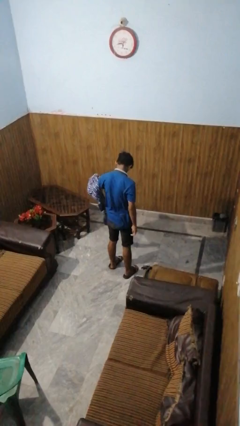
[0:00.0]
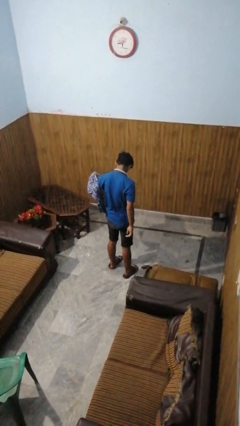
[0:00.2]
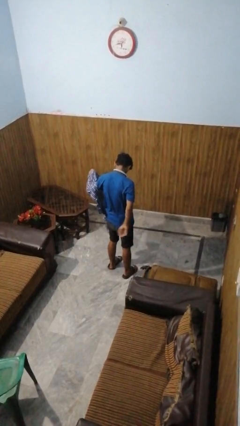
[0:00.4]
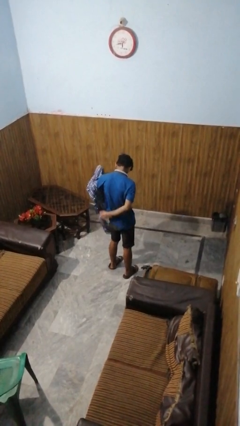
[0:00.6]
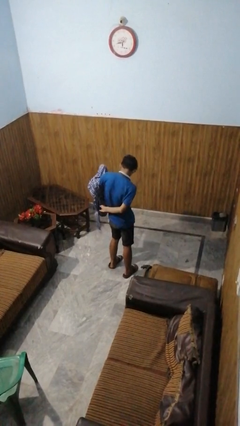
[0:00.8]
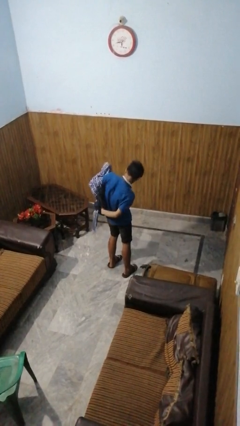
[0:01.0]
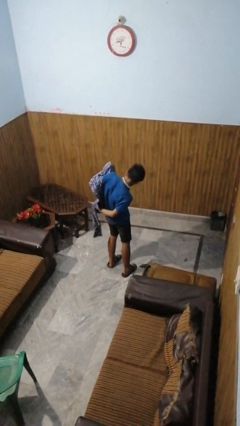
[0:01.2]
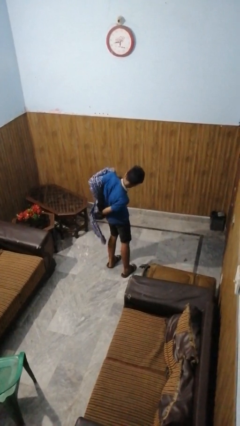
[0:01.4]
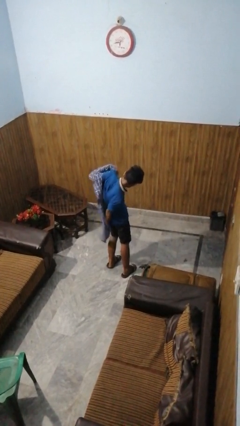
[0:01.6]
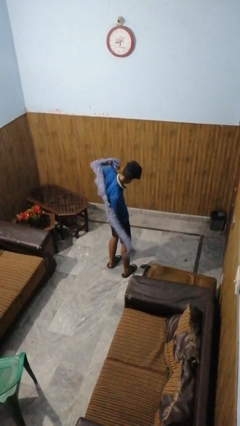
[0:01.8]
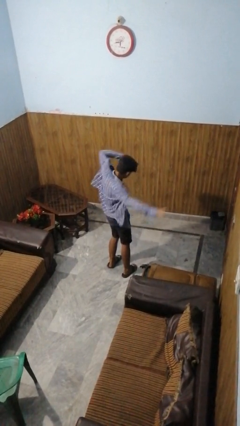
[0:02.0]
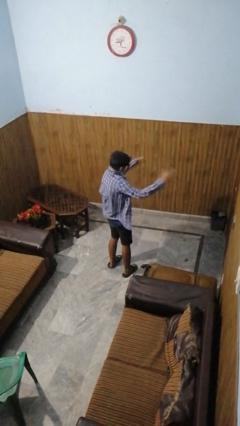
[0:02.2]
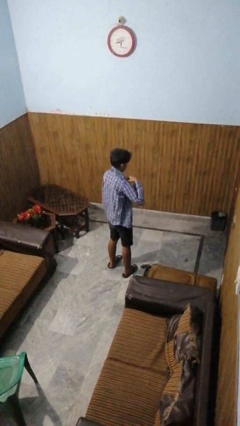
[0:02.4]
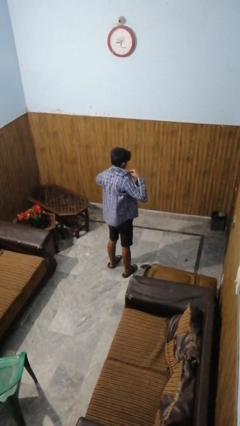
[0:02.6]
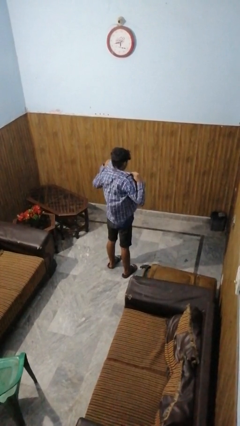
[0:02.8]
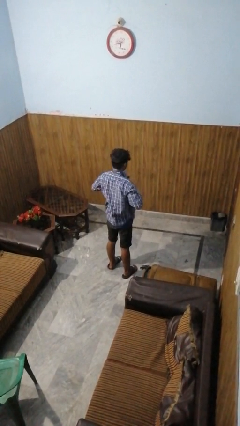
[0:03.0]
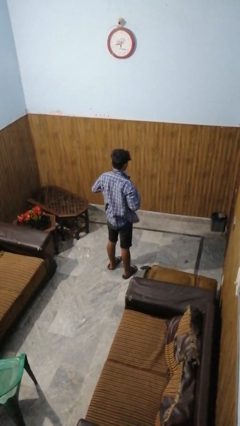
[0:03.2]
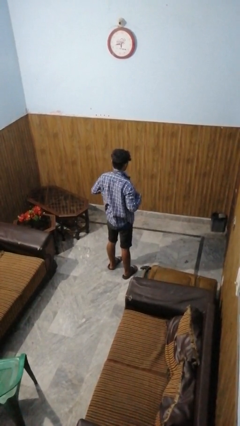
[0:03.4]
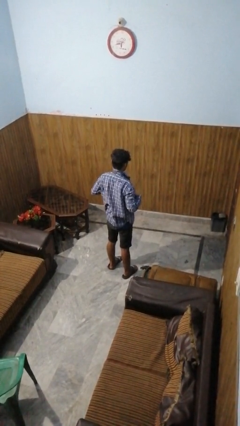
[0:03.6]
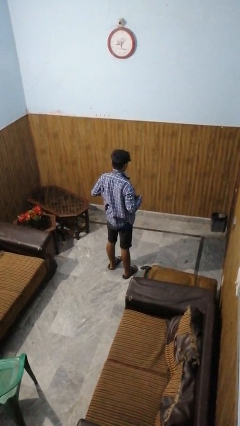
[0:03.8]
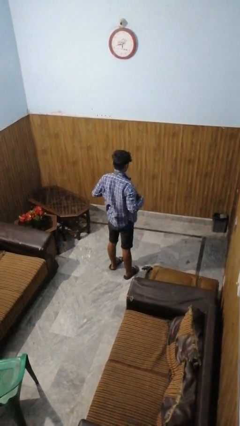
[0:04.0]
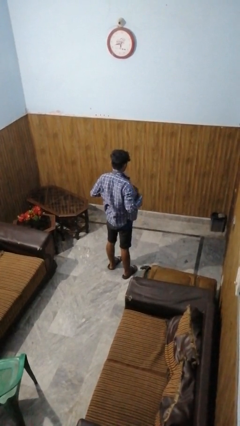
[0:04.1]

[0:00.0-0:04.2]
person puts on shirt

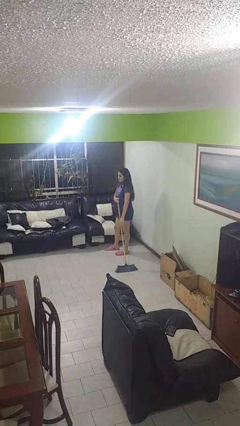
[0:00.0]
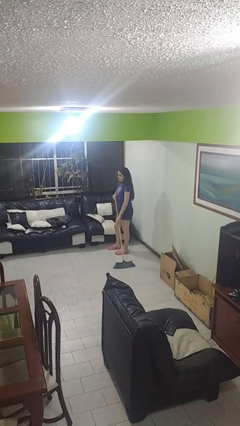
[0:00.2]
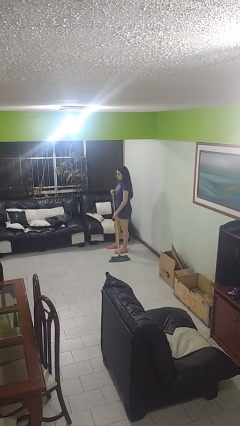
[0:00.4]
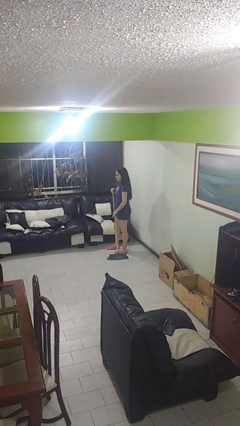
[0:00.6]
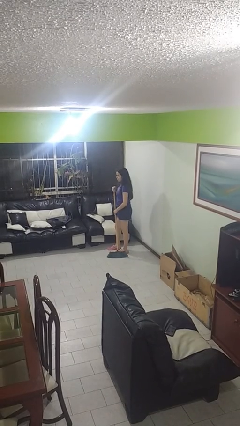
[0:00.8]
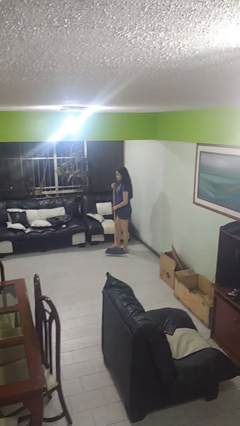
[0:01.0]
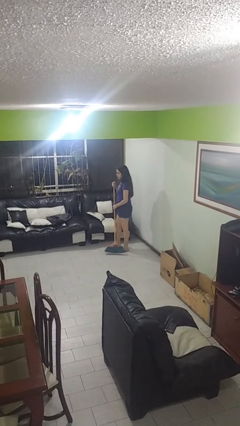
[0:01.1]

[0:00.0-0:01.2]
person sweeps floor

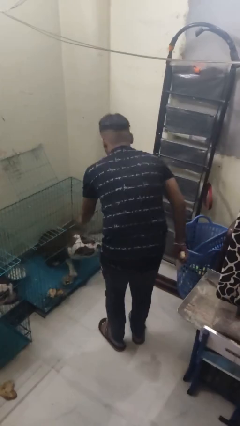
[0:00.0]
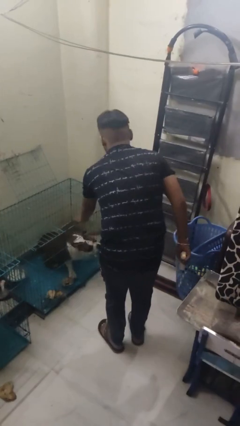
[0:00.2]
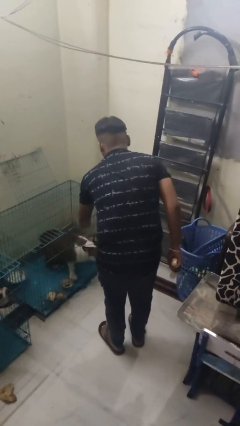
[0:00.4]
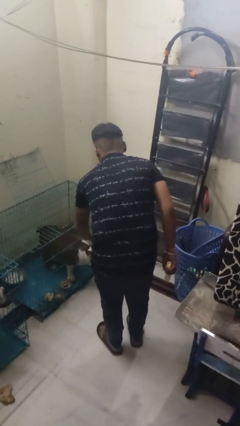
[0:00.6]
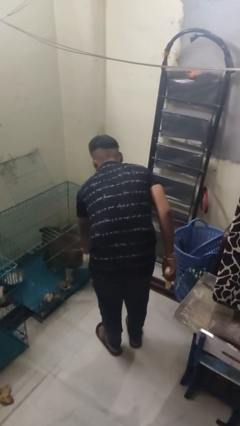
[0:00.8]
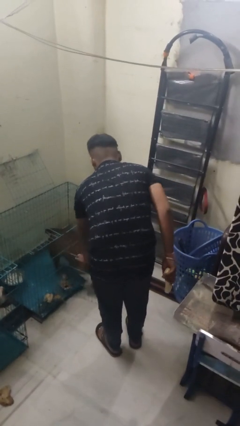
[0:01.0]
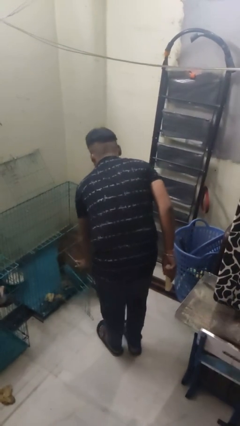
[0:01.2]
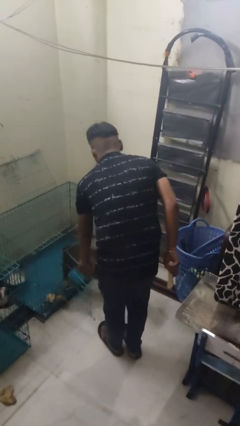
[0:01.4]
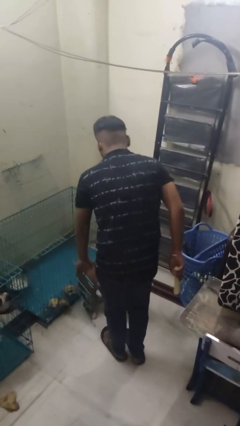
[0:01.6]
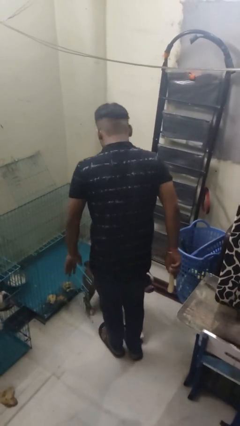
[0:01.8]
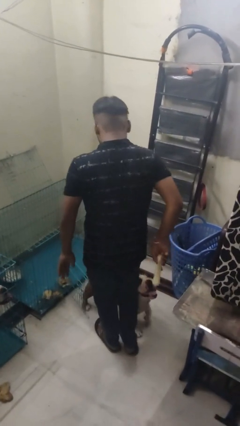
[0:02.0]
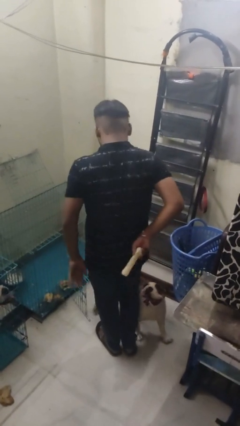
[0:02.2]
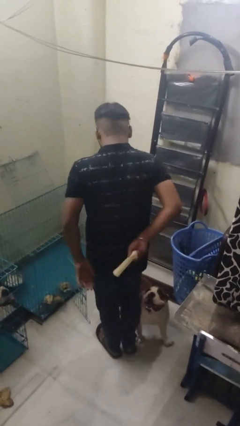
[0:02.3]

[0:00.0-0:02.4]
person uncrates dog

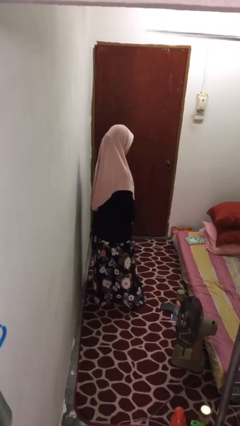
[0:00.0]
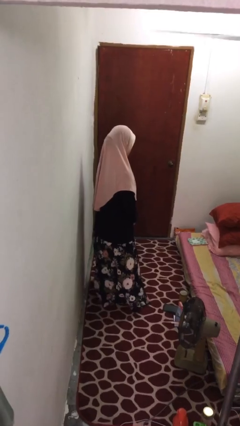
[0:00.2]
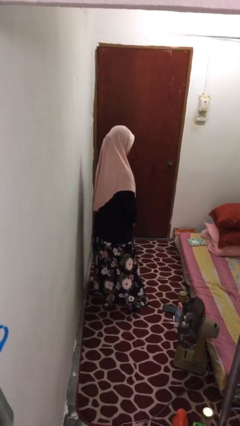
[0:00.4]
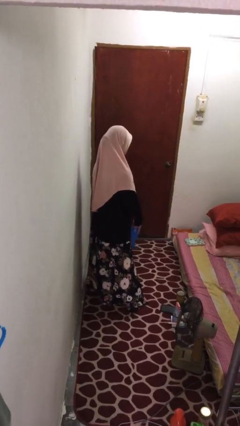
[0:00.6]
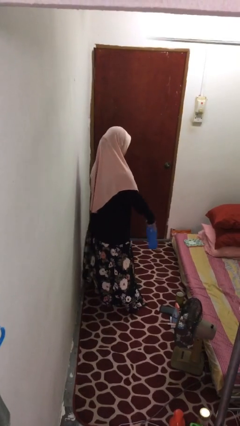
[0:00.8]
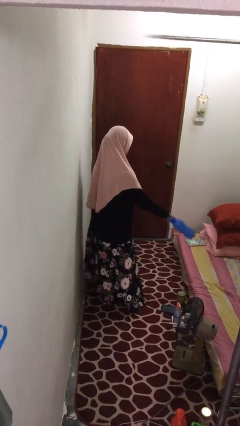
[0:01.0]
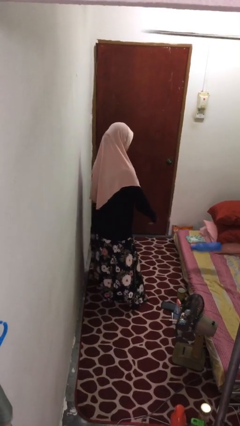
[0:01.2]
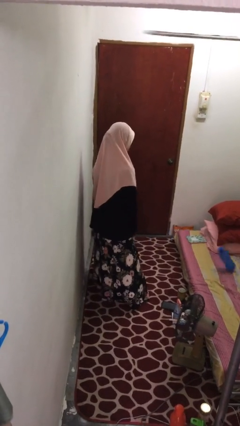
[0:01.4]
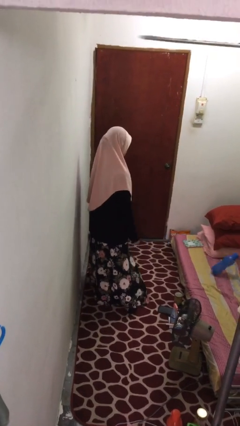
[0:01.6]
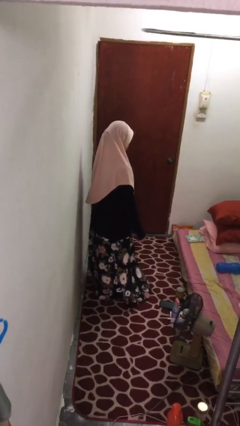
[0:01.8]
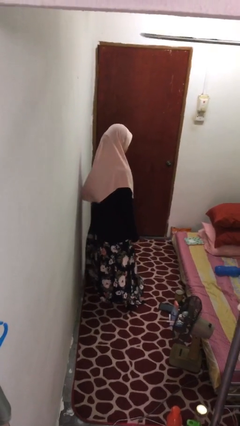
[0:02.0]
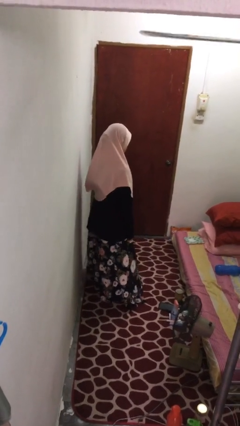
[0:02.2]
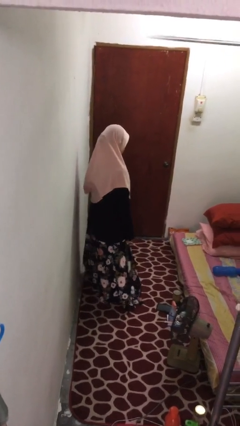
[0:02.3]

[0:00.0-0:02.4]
person throws object on bed

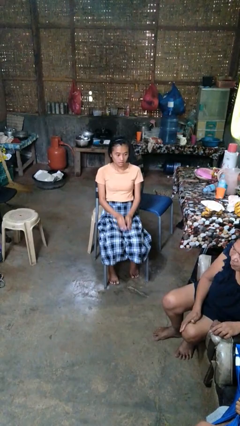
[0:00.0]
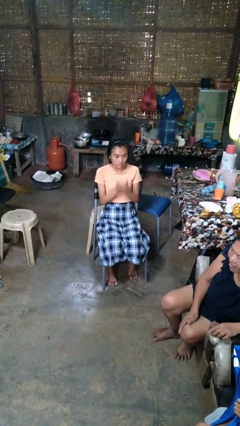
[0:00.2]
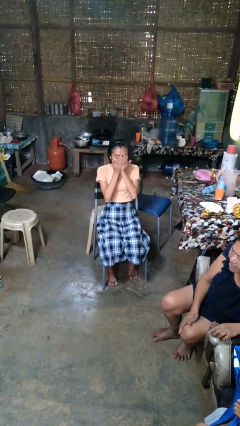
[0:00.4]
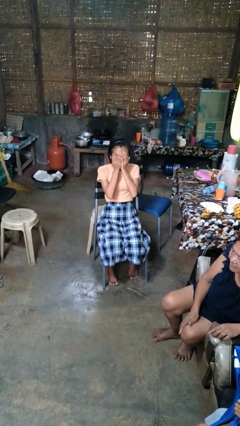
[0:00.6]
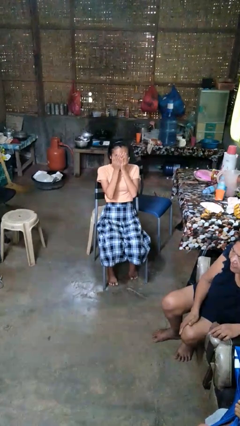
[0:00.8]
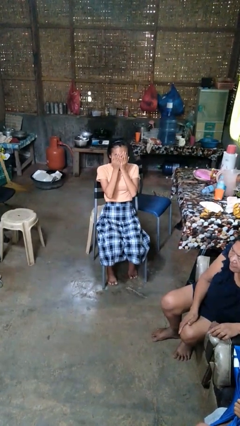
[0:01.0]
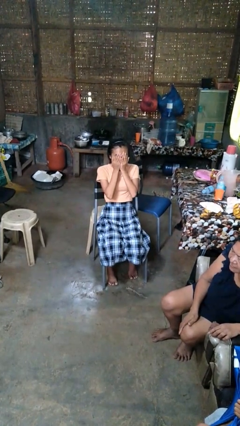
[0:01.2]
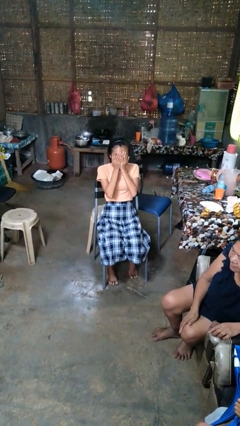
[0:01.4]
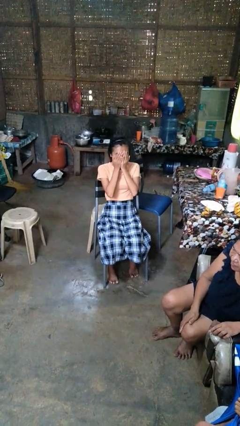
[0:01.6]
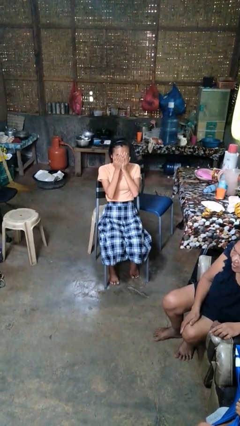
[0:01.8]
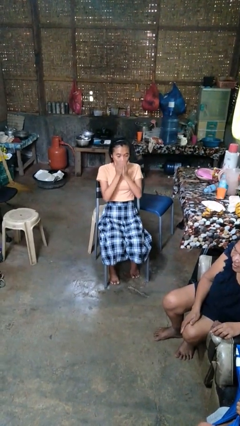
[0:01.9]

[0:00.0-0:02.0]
person covers face with hands

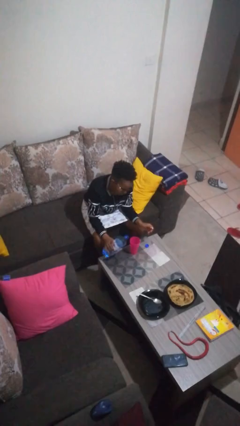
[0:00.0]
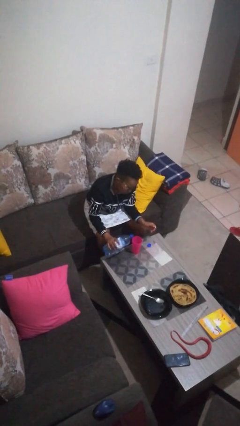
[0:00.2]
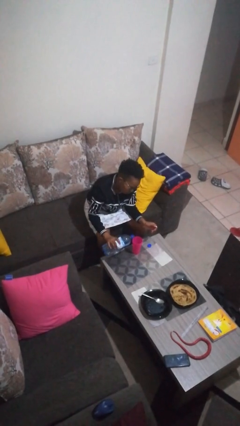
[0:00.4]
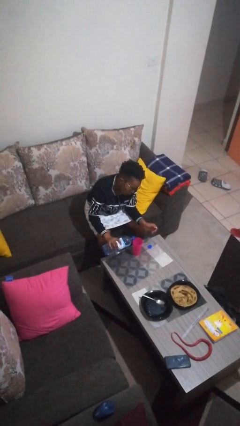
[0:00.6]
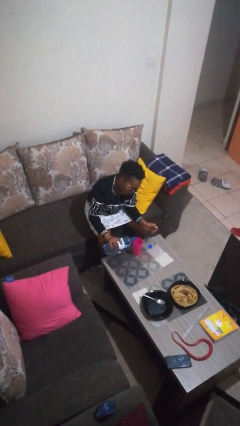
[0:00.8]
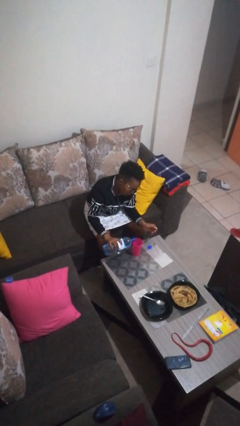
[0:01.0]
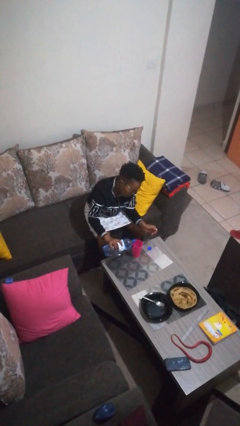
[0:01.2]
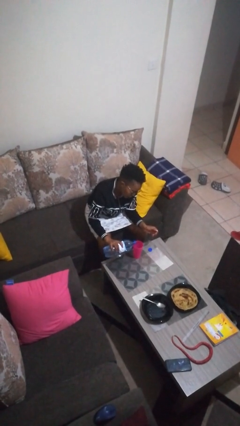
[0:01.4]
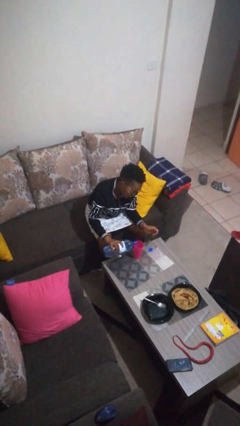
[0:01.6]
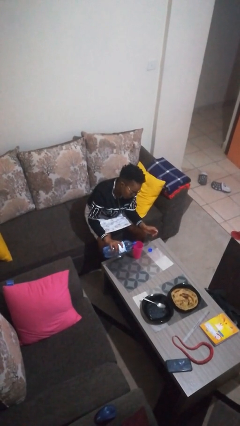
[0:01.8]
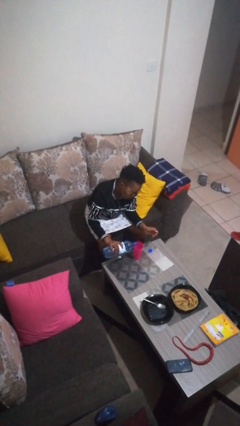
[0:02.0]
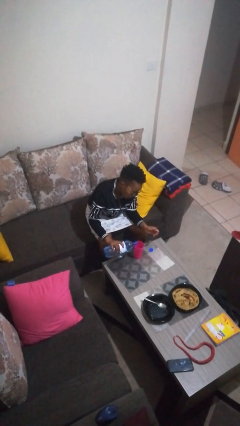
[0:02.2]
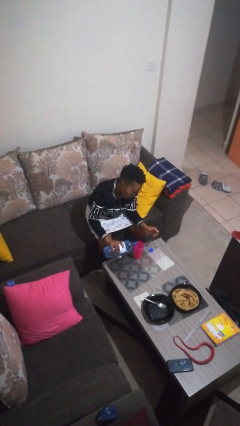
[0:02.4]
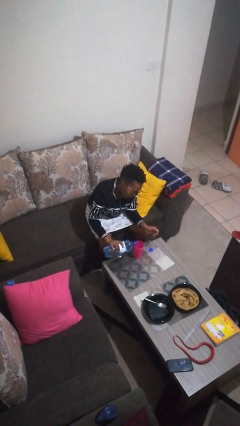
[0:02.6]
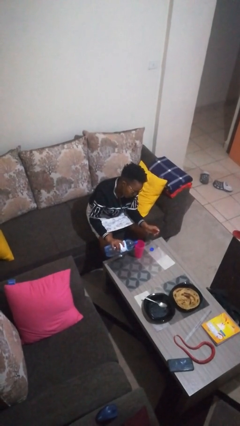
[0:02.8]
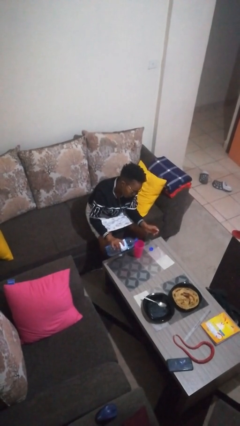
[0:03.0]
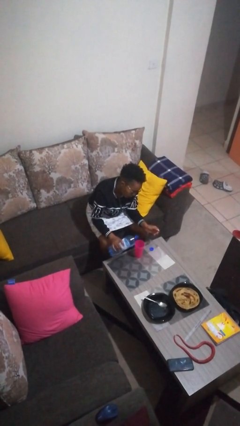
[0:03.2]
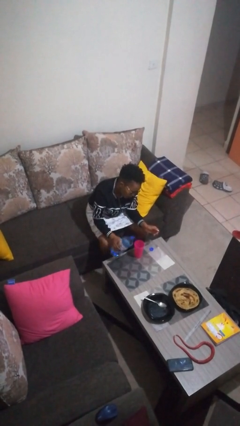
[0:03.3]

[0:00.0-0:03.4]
person pours liquid into cup

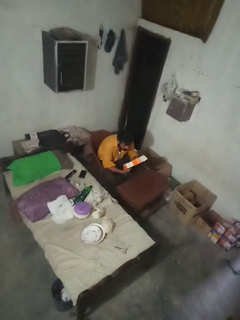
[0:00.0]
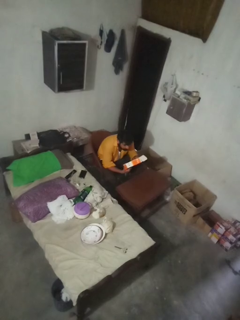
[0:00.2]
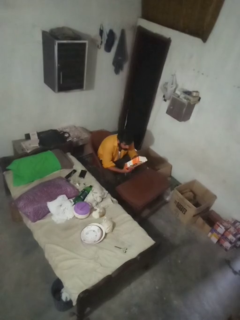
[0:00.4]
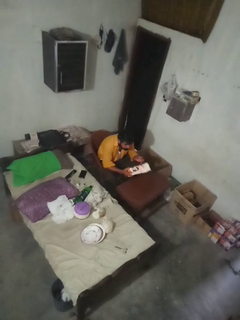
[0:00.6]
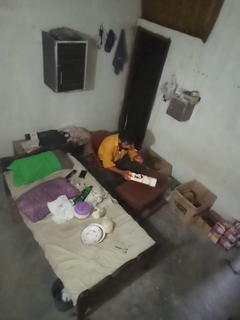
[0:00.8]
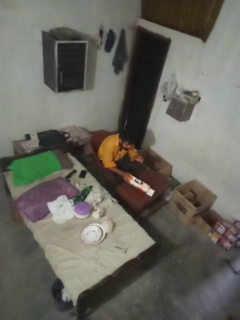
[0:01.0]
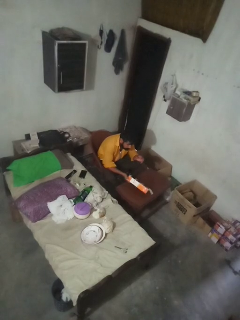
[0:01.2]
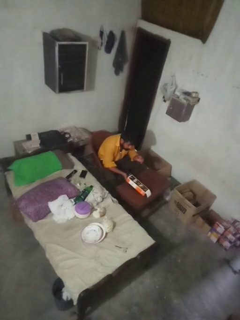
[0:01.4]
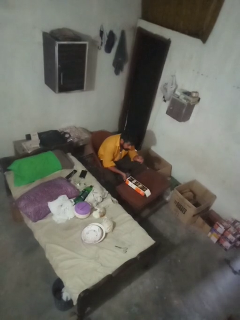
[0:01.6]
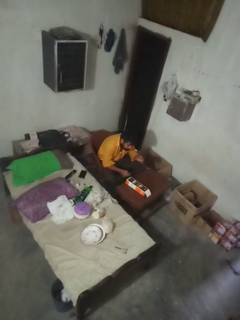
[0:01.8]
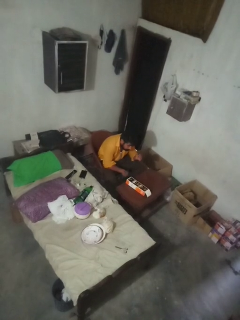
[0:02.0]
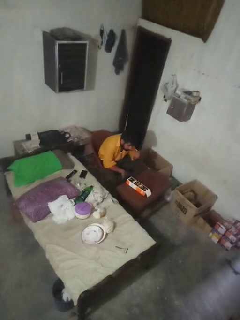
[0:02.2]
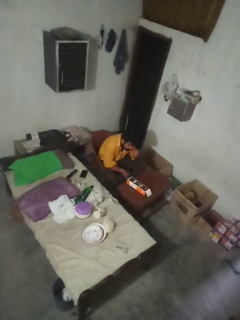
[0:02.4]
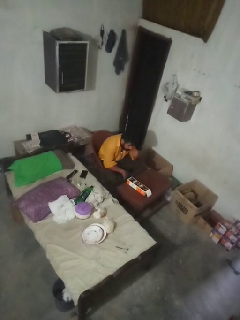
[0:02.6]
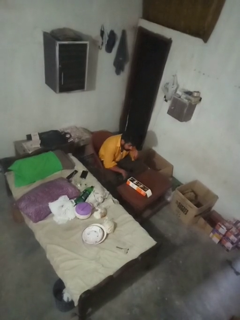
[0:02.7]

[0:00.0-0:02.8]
person puts down object on countertop
